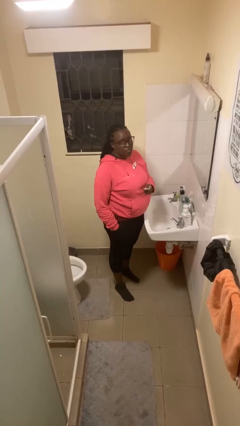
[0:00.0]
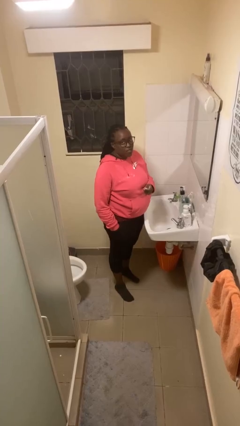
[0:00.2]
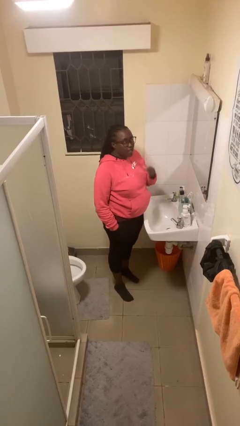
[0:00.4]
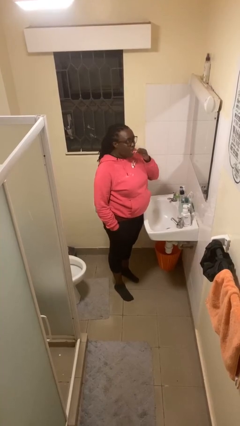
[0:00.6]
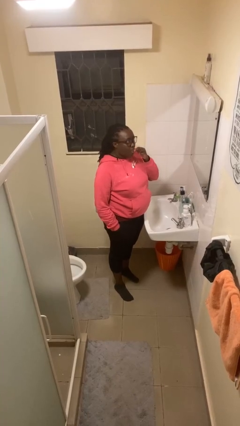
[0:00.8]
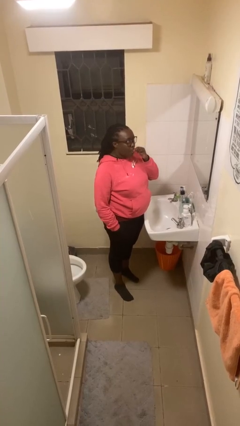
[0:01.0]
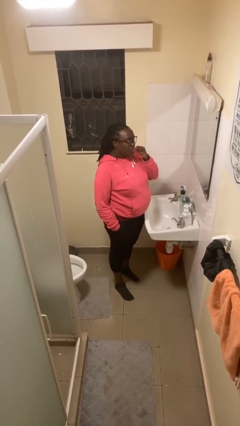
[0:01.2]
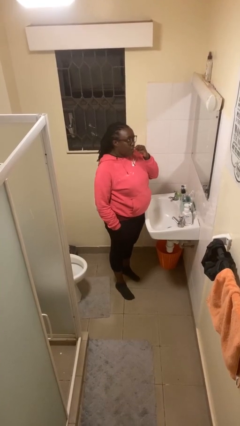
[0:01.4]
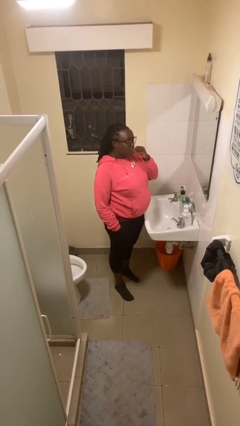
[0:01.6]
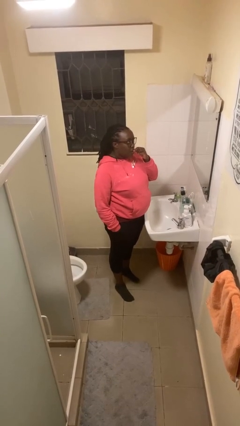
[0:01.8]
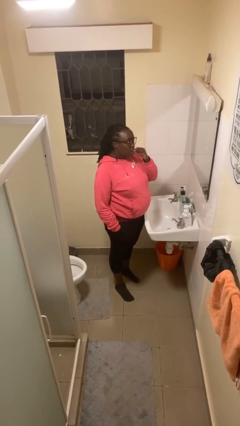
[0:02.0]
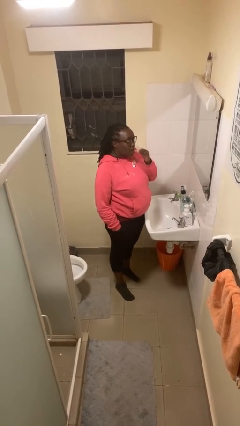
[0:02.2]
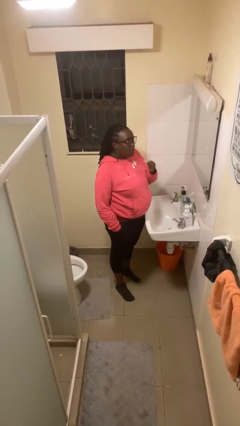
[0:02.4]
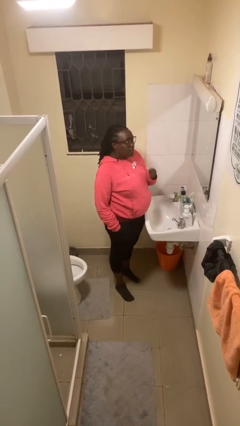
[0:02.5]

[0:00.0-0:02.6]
person flosses

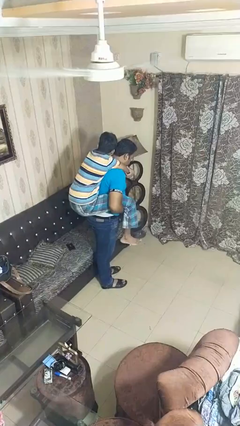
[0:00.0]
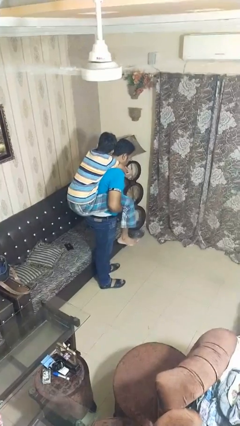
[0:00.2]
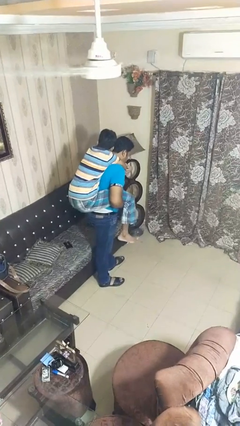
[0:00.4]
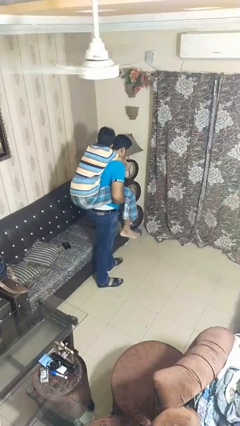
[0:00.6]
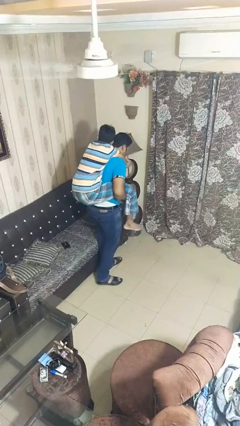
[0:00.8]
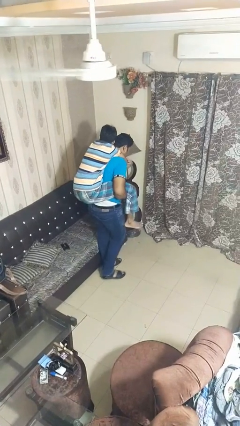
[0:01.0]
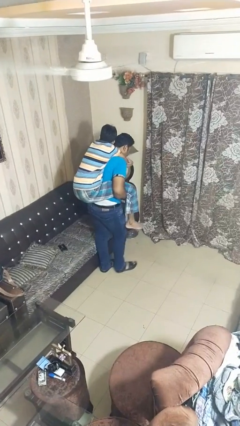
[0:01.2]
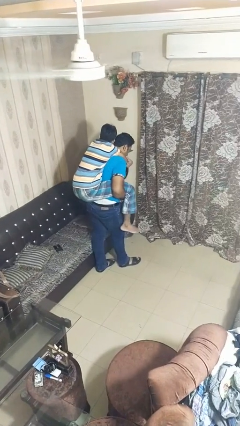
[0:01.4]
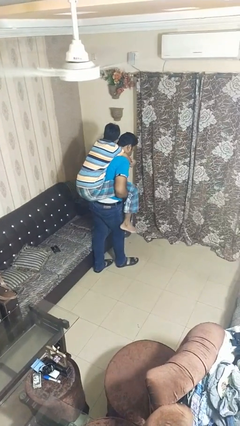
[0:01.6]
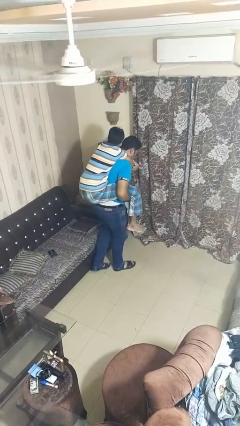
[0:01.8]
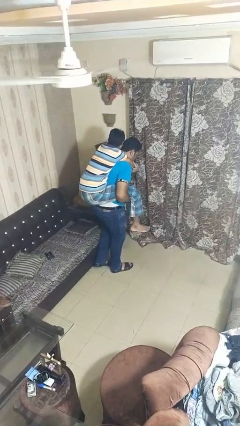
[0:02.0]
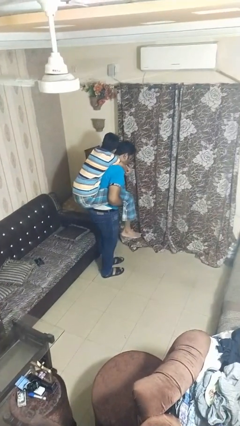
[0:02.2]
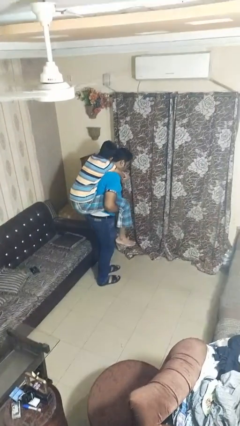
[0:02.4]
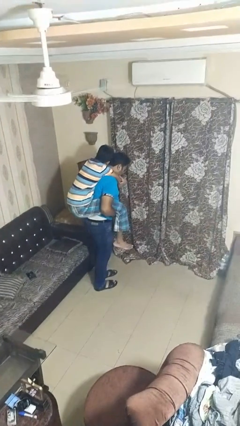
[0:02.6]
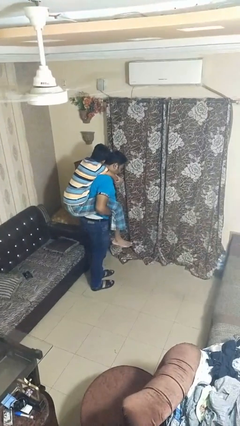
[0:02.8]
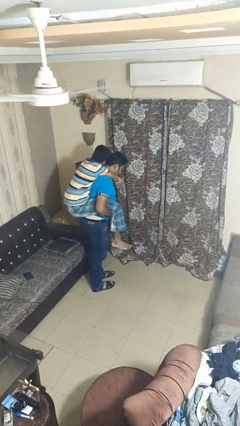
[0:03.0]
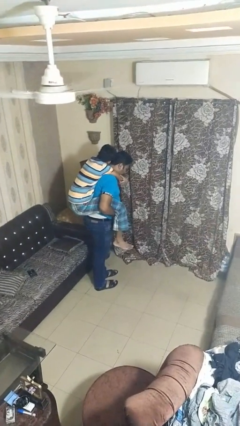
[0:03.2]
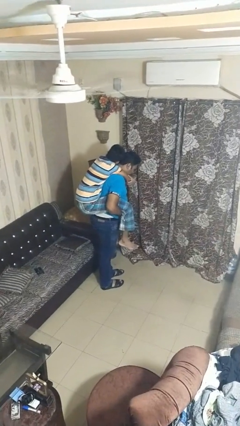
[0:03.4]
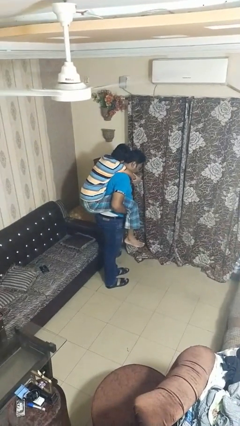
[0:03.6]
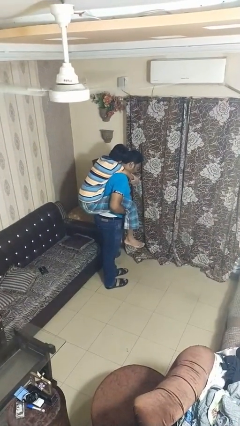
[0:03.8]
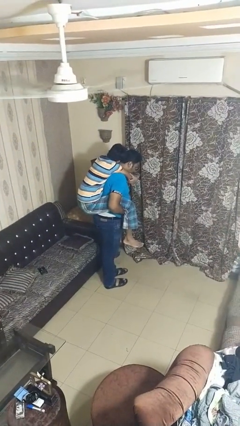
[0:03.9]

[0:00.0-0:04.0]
person carries person on back

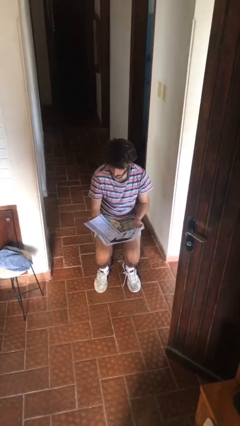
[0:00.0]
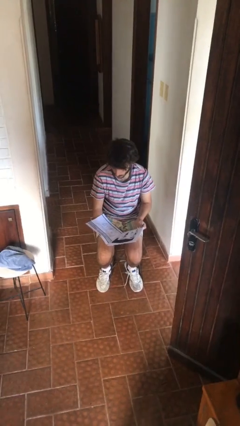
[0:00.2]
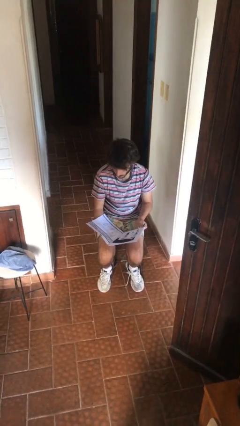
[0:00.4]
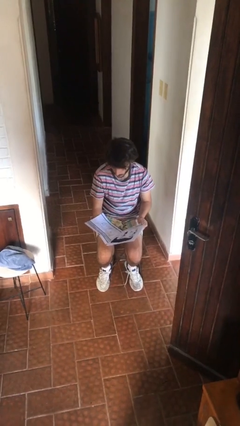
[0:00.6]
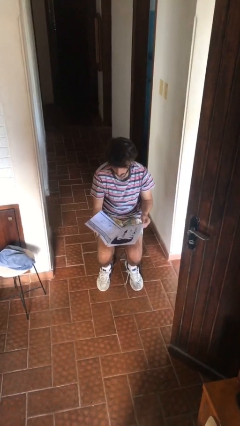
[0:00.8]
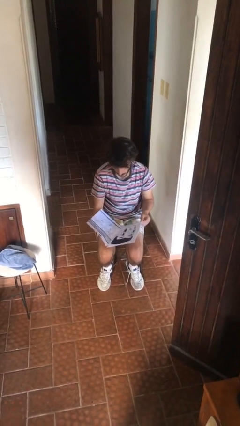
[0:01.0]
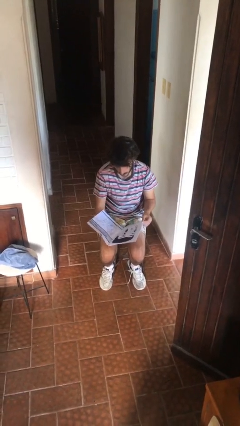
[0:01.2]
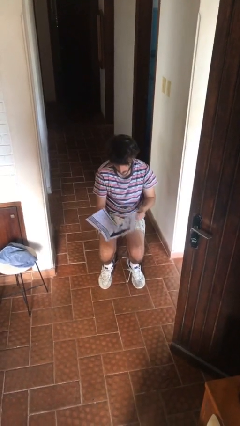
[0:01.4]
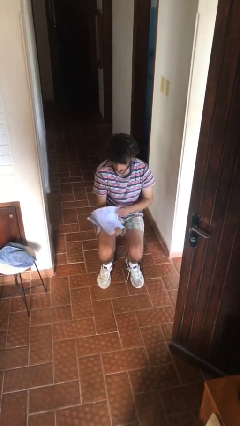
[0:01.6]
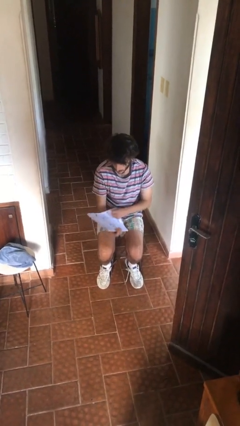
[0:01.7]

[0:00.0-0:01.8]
person reads document

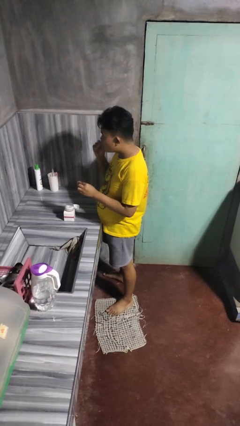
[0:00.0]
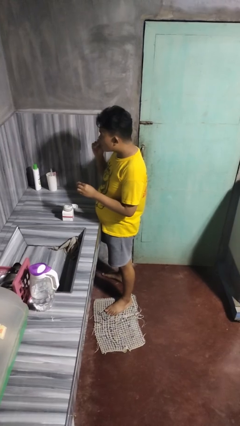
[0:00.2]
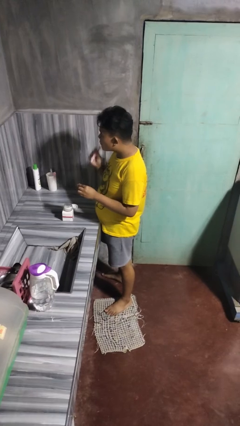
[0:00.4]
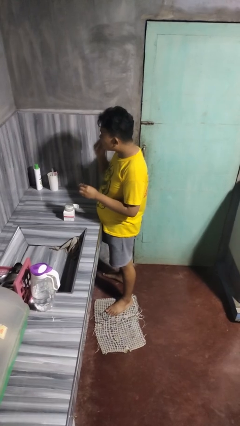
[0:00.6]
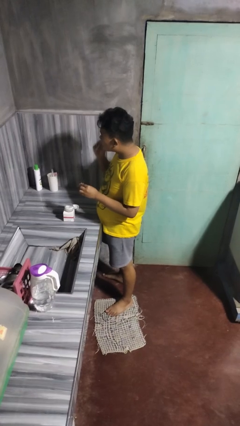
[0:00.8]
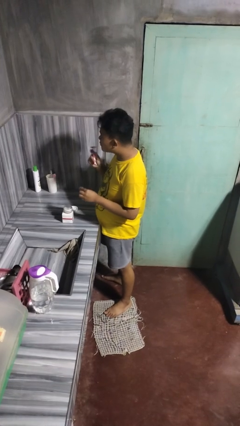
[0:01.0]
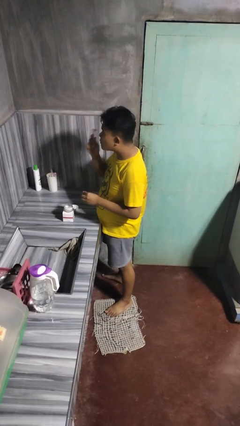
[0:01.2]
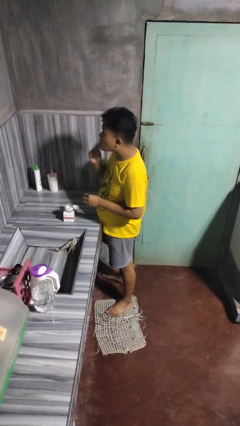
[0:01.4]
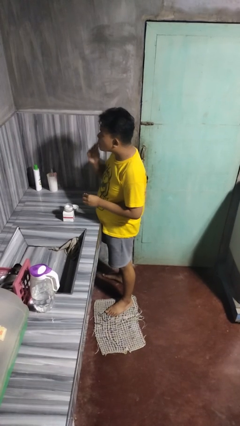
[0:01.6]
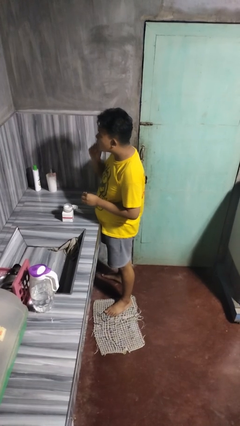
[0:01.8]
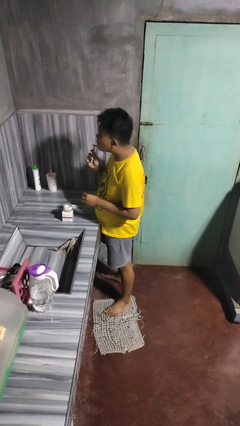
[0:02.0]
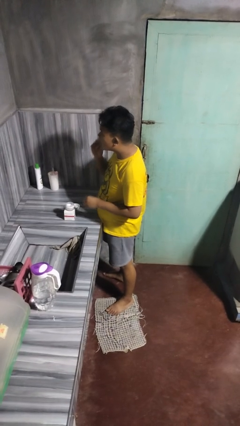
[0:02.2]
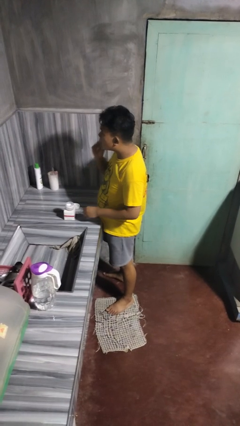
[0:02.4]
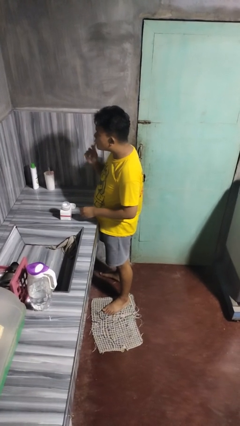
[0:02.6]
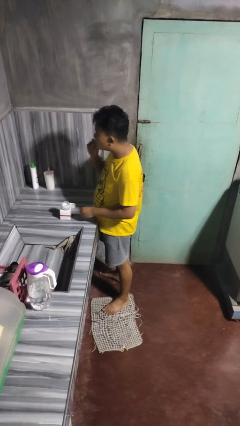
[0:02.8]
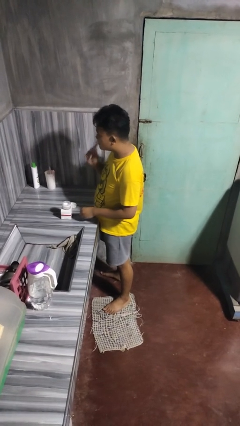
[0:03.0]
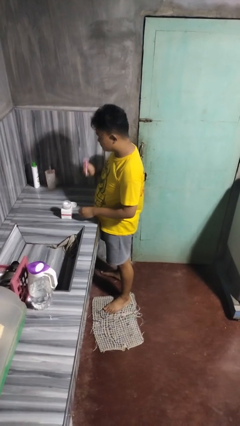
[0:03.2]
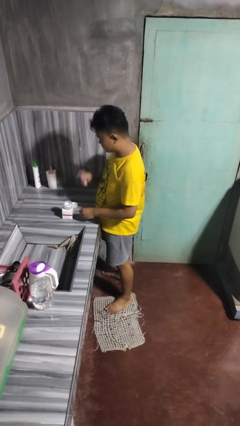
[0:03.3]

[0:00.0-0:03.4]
person shaves face

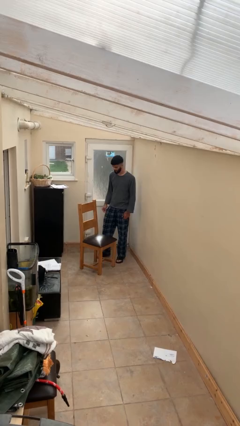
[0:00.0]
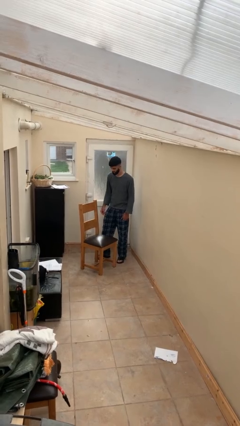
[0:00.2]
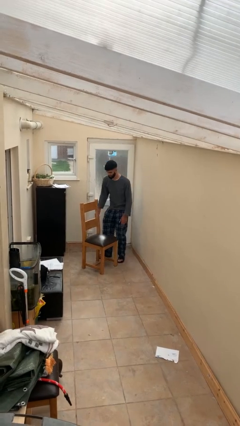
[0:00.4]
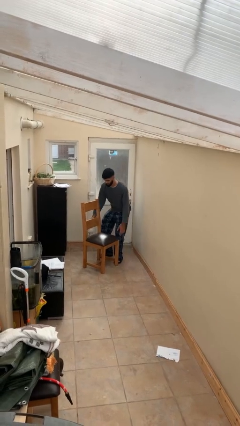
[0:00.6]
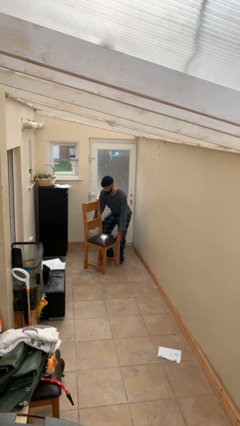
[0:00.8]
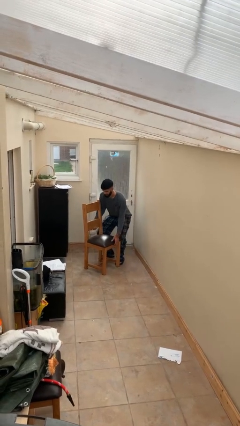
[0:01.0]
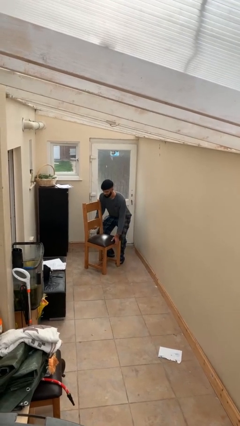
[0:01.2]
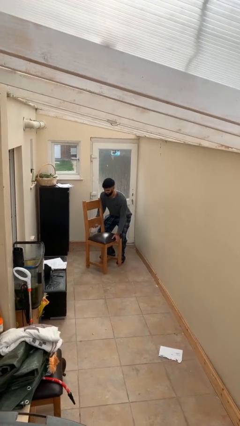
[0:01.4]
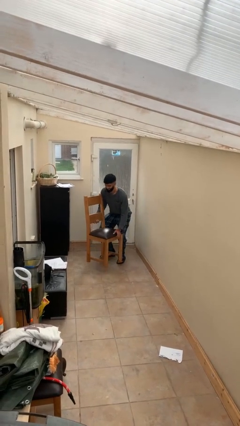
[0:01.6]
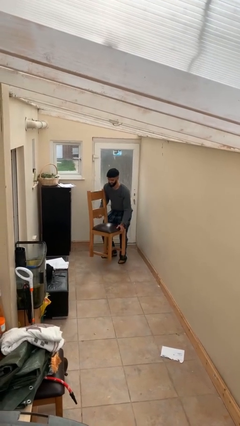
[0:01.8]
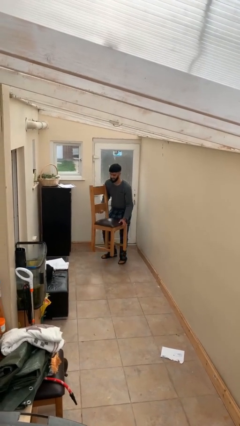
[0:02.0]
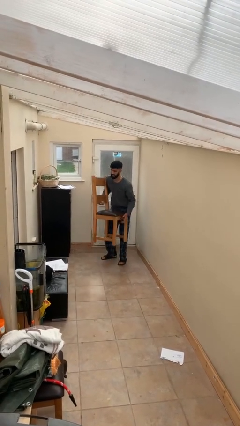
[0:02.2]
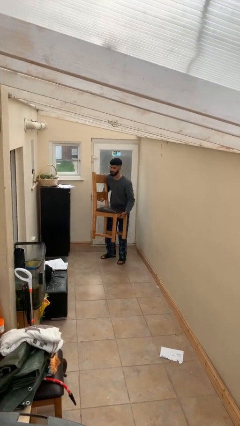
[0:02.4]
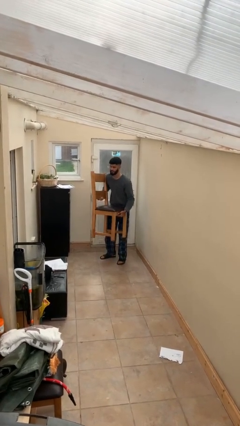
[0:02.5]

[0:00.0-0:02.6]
person picks up object from floor

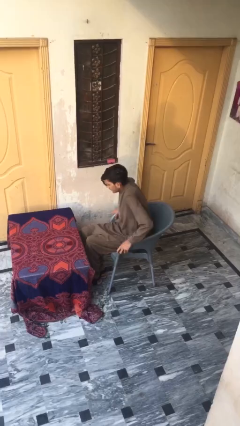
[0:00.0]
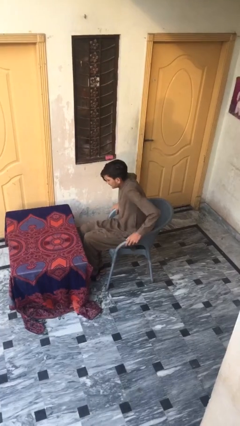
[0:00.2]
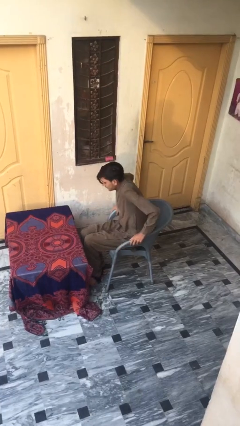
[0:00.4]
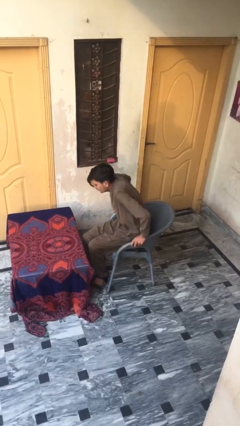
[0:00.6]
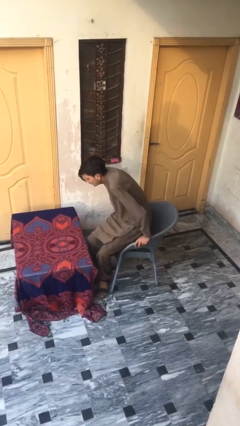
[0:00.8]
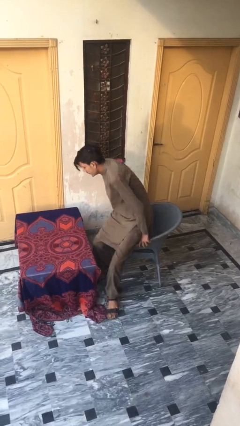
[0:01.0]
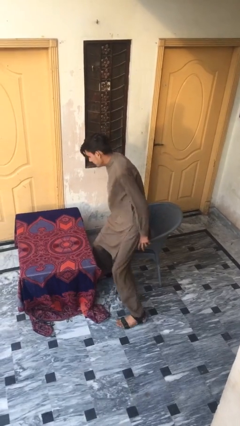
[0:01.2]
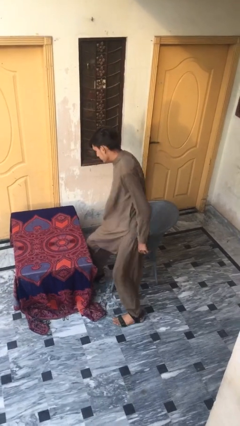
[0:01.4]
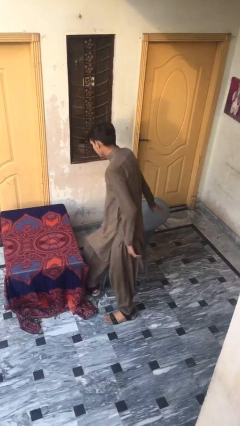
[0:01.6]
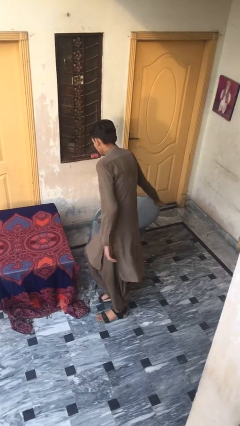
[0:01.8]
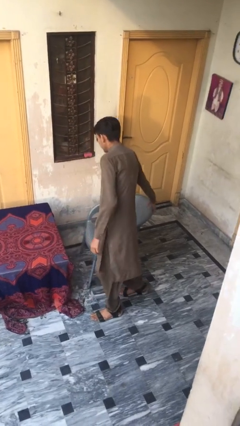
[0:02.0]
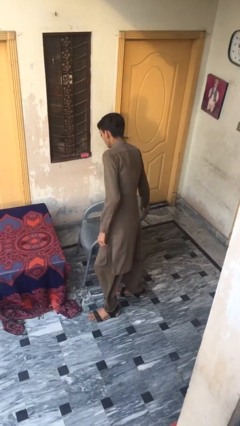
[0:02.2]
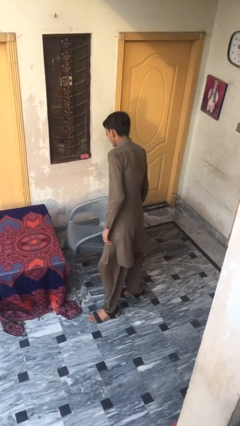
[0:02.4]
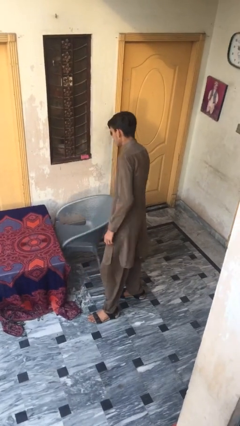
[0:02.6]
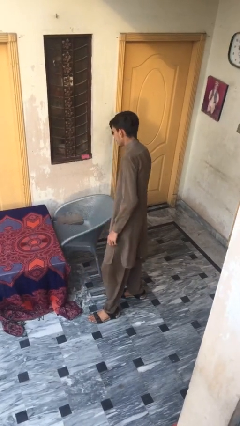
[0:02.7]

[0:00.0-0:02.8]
person stands up

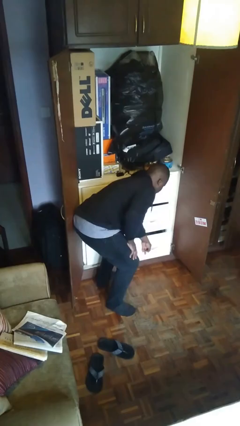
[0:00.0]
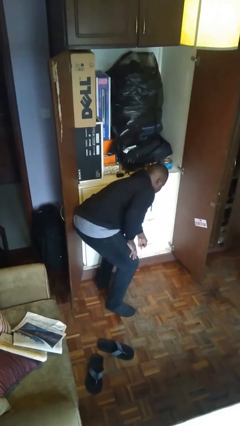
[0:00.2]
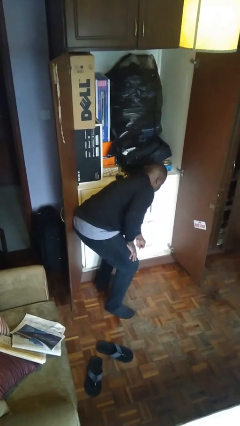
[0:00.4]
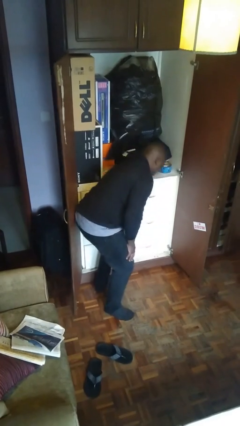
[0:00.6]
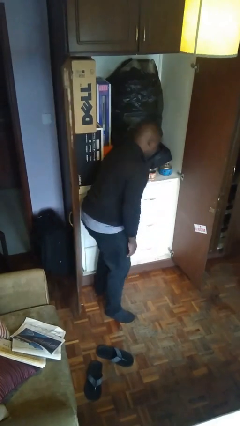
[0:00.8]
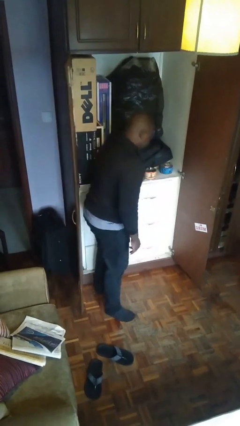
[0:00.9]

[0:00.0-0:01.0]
person closes dresser drawer
